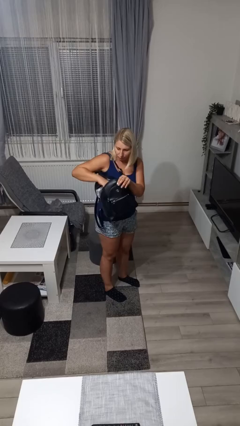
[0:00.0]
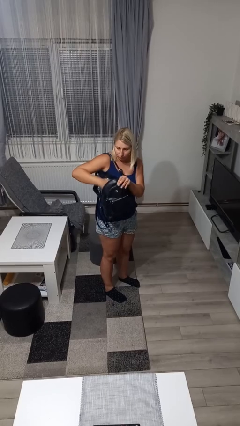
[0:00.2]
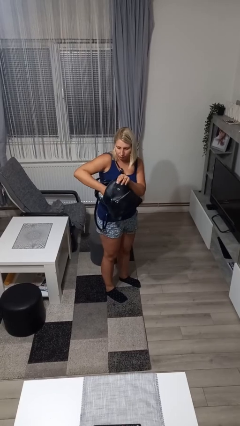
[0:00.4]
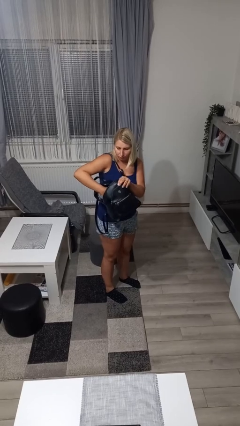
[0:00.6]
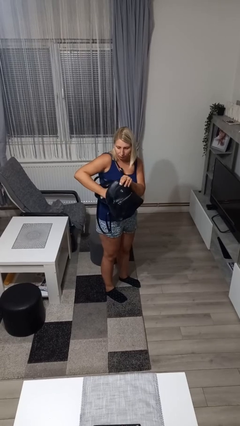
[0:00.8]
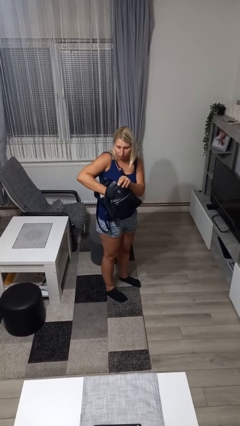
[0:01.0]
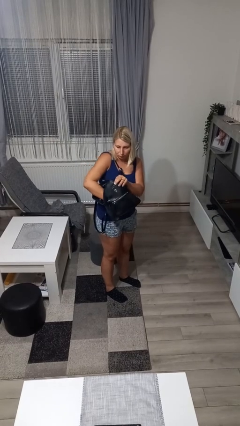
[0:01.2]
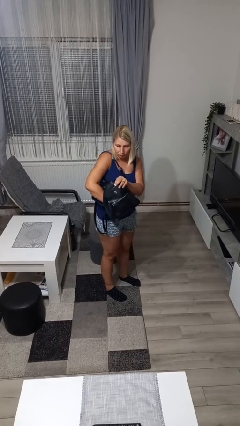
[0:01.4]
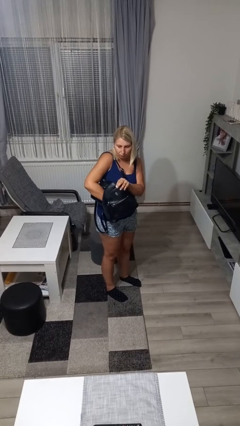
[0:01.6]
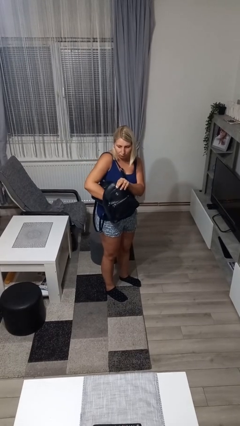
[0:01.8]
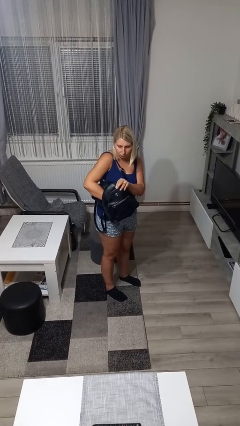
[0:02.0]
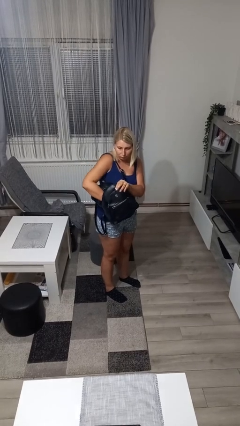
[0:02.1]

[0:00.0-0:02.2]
person searches in backpack

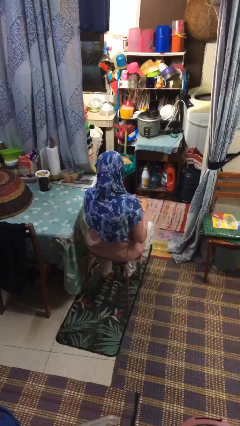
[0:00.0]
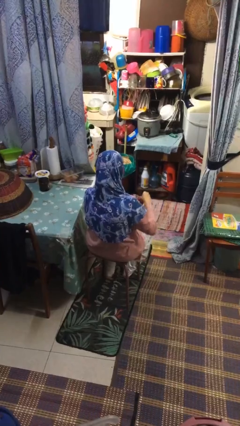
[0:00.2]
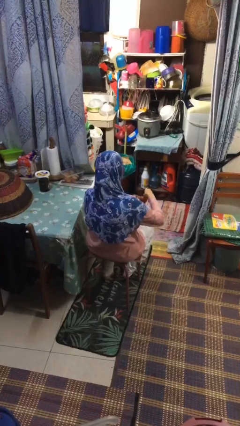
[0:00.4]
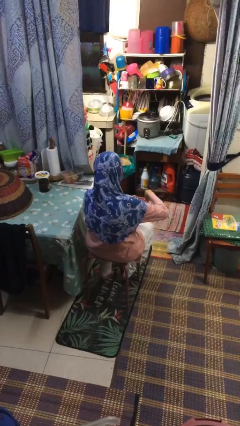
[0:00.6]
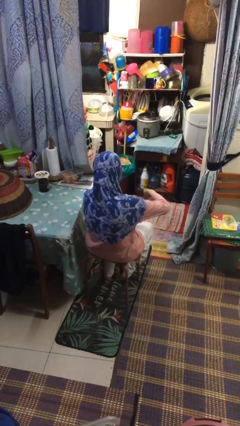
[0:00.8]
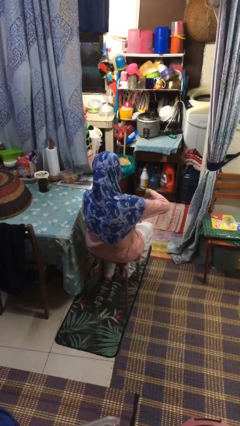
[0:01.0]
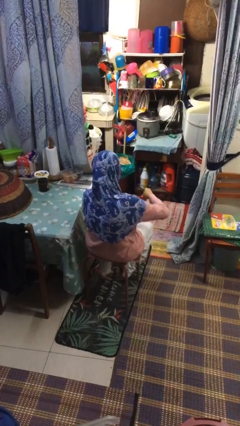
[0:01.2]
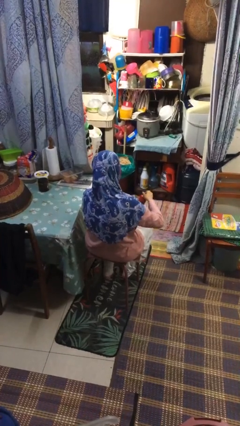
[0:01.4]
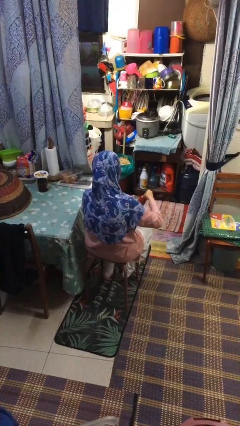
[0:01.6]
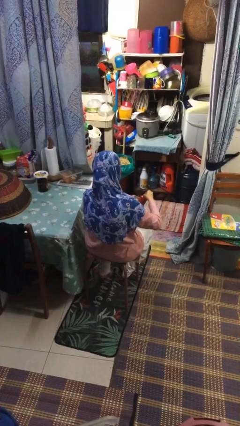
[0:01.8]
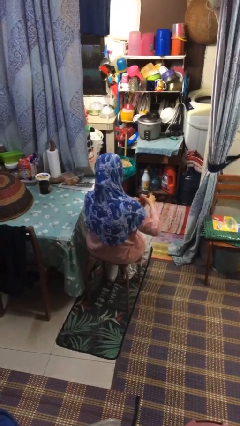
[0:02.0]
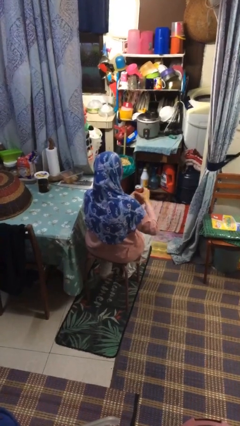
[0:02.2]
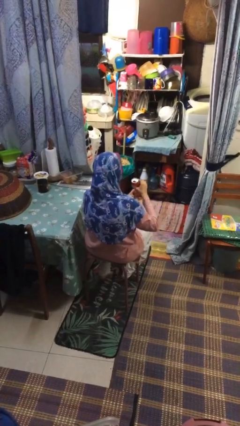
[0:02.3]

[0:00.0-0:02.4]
person opens beverage can

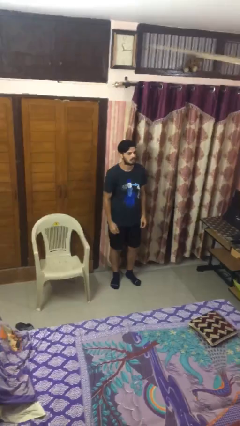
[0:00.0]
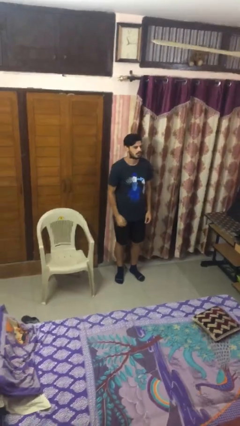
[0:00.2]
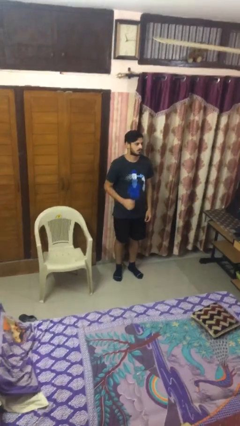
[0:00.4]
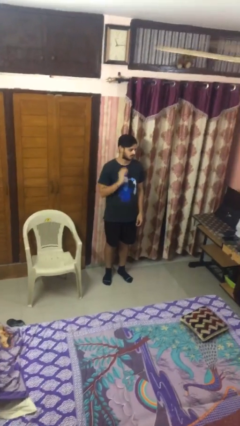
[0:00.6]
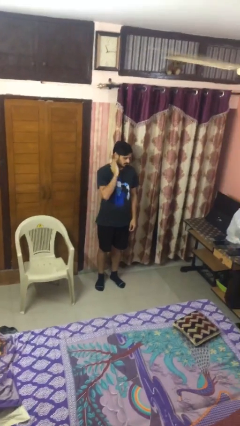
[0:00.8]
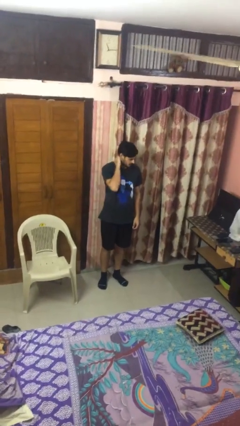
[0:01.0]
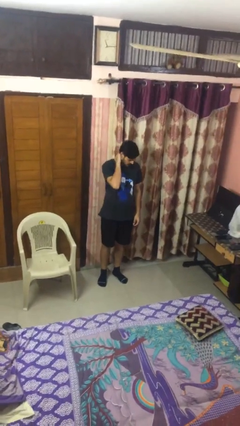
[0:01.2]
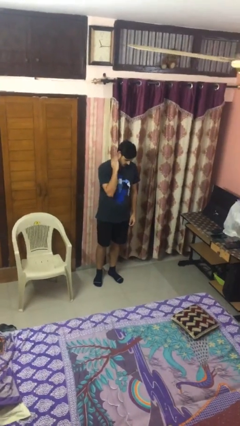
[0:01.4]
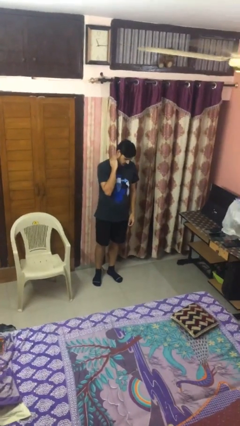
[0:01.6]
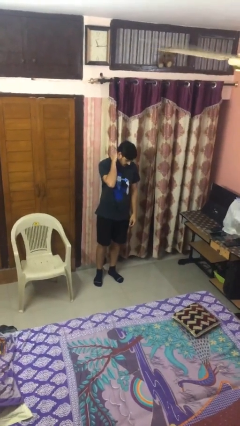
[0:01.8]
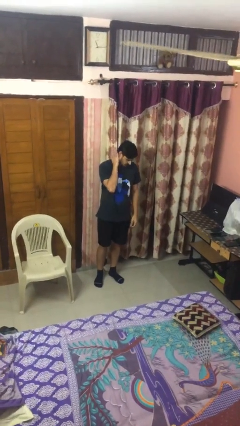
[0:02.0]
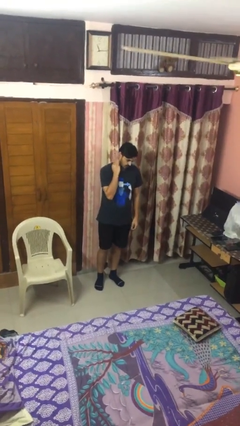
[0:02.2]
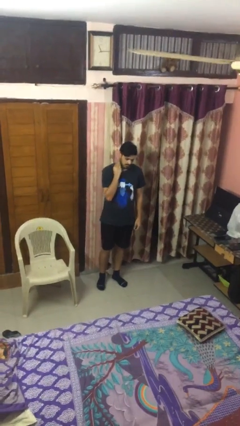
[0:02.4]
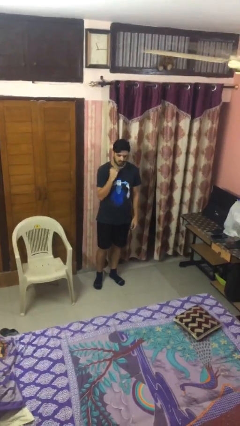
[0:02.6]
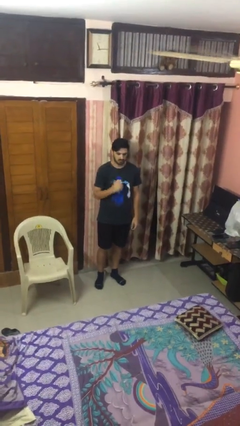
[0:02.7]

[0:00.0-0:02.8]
person rubs neck

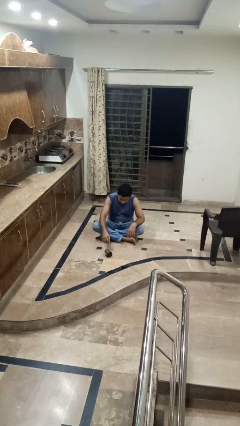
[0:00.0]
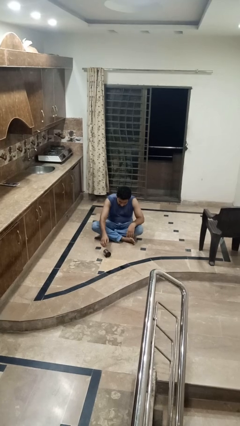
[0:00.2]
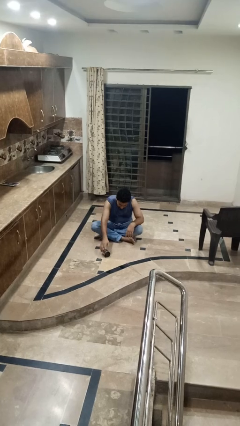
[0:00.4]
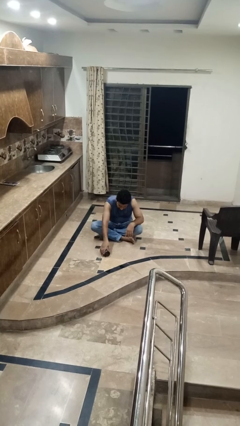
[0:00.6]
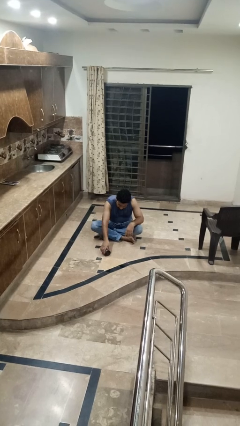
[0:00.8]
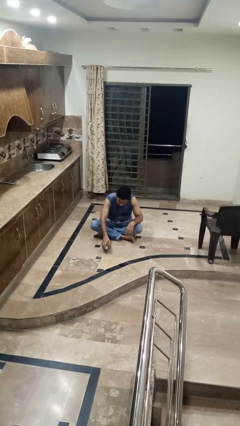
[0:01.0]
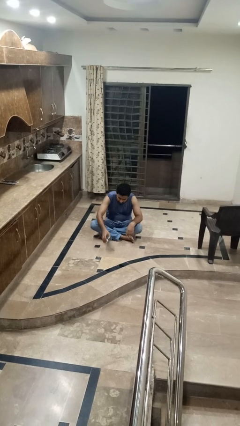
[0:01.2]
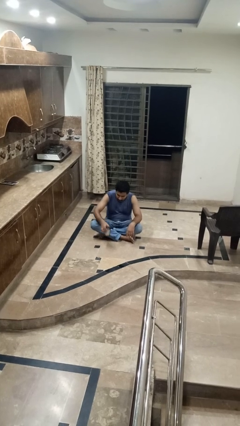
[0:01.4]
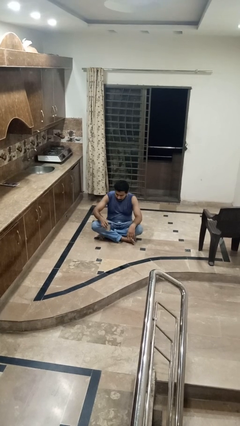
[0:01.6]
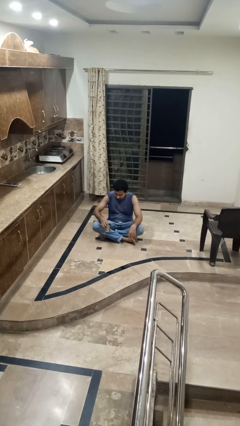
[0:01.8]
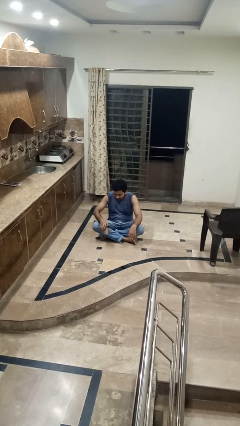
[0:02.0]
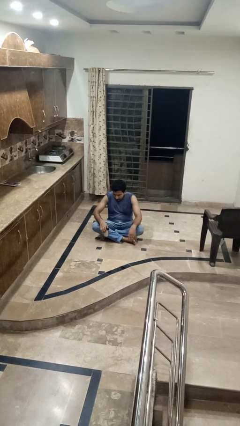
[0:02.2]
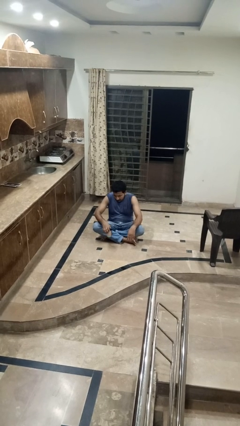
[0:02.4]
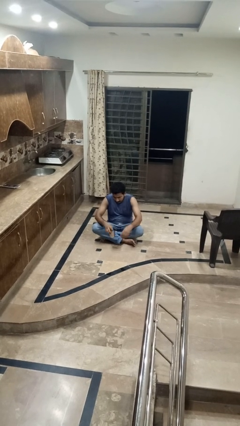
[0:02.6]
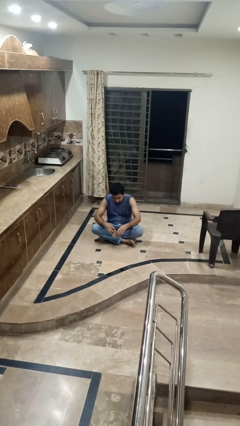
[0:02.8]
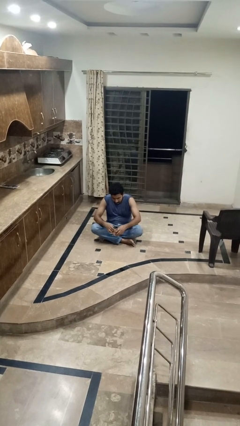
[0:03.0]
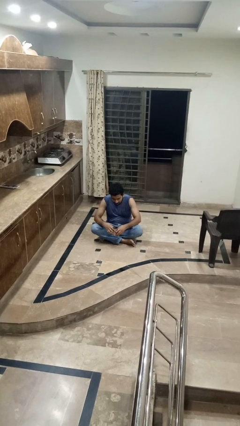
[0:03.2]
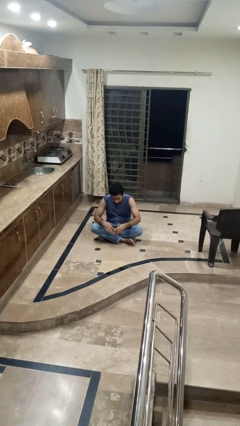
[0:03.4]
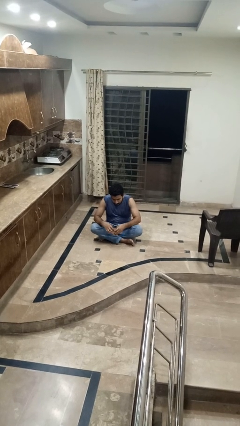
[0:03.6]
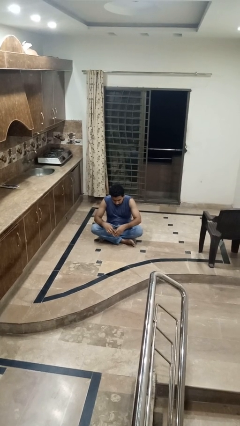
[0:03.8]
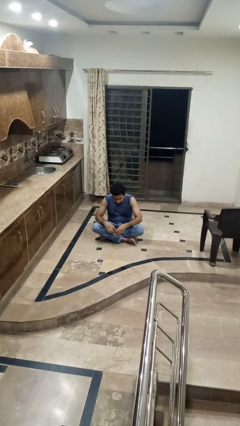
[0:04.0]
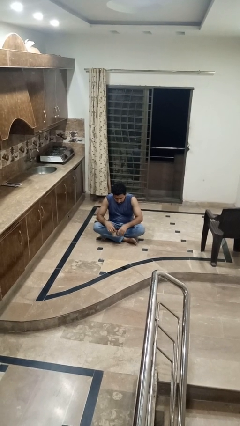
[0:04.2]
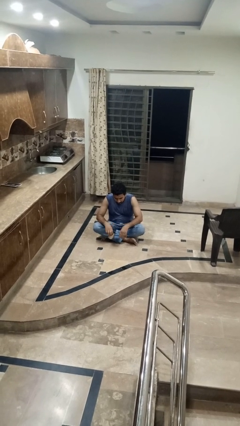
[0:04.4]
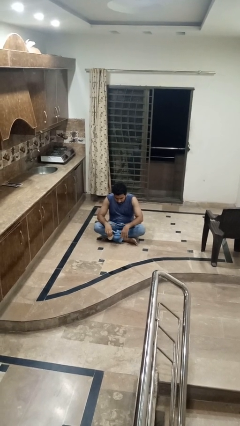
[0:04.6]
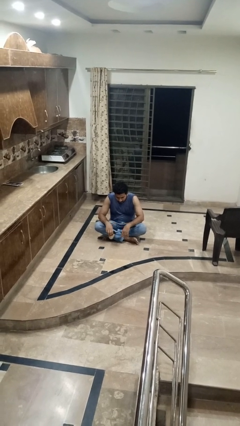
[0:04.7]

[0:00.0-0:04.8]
person sets upright glass

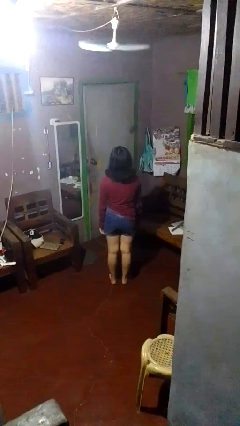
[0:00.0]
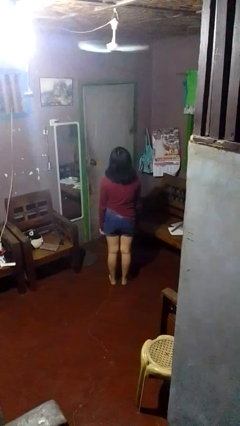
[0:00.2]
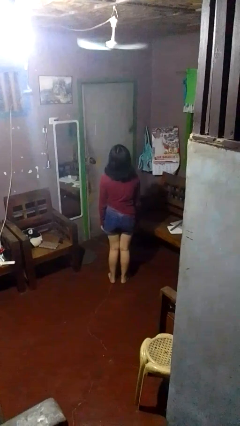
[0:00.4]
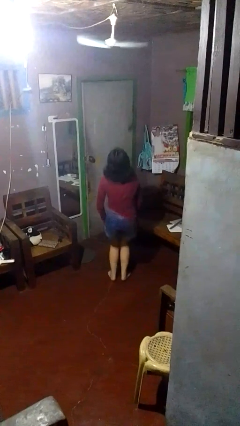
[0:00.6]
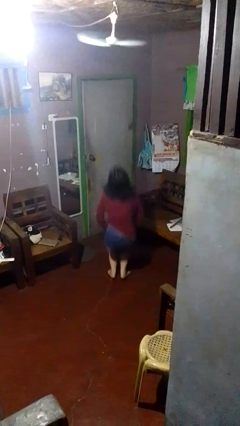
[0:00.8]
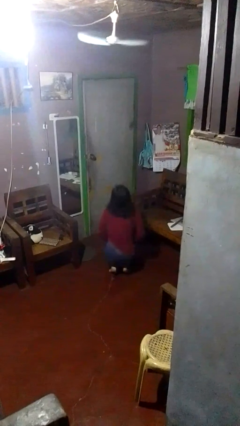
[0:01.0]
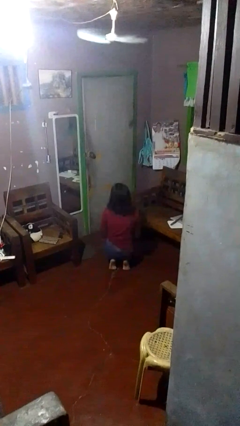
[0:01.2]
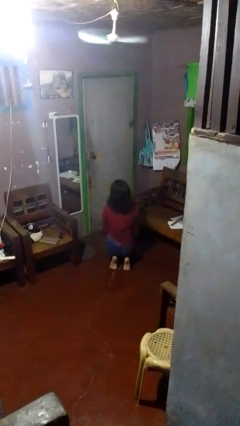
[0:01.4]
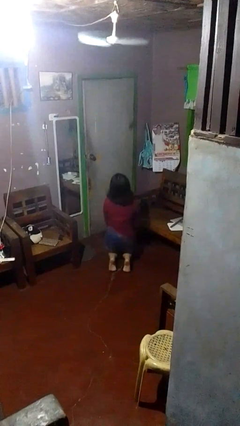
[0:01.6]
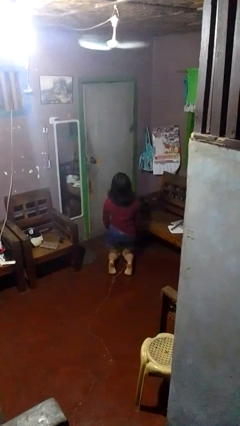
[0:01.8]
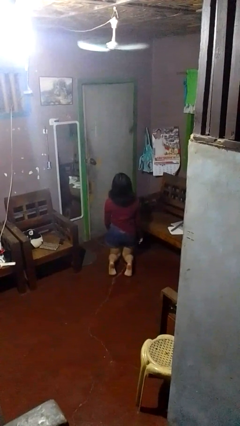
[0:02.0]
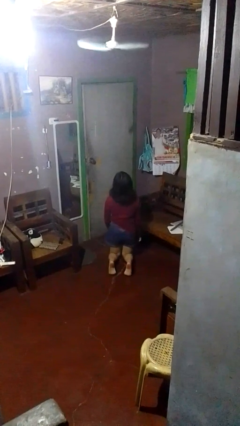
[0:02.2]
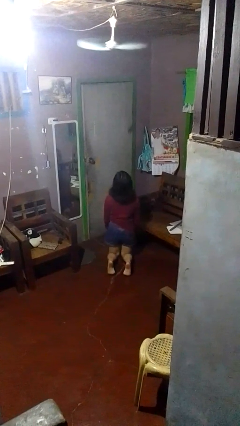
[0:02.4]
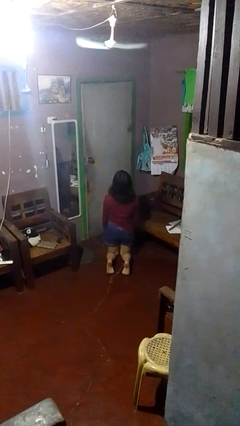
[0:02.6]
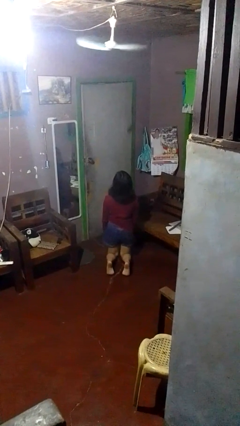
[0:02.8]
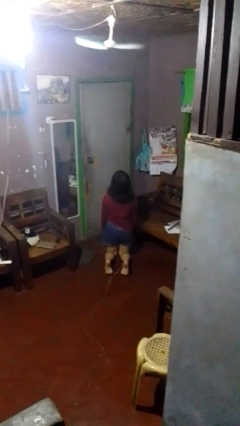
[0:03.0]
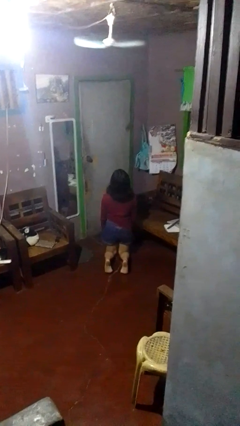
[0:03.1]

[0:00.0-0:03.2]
person kneels

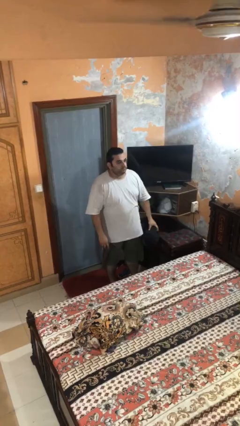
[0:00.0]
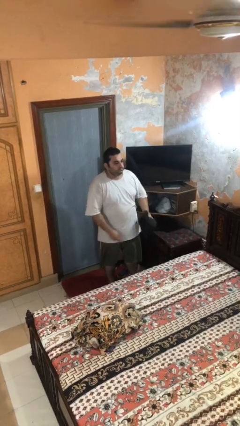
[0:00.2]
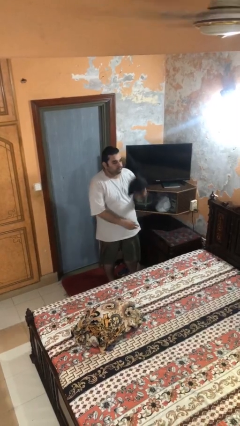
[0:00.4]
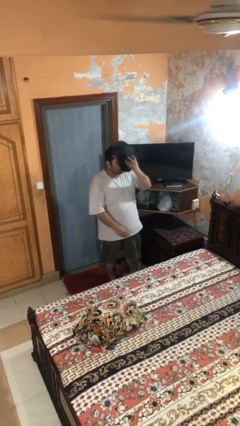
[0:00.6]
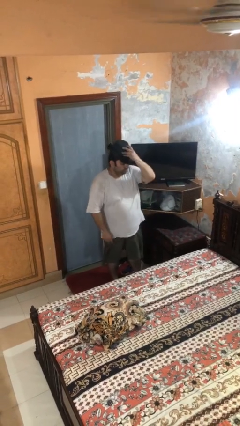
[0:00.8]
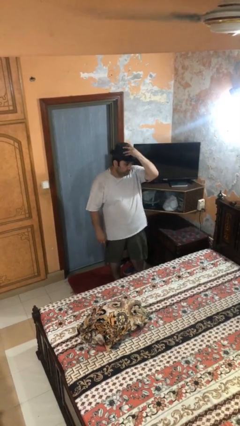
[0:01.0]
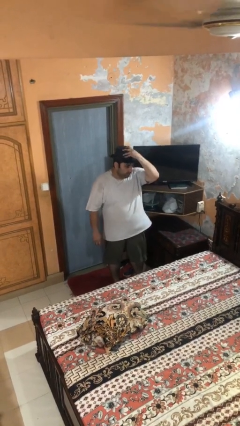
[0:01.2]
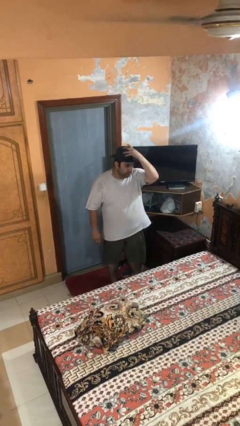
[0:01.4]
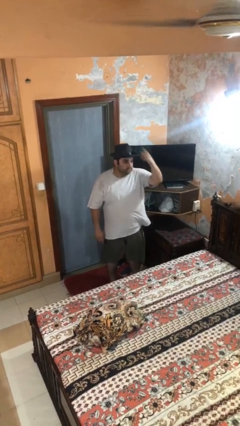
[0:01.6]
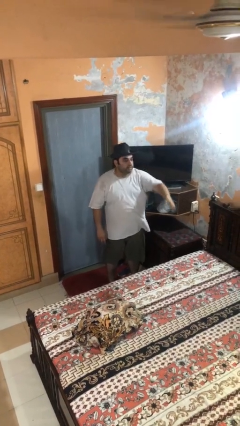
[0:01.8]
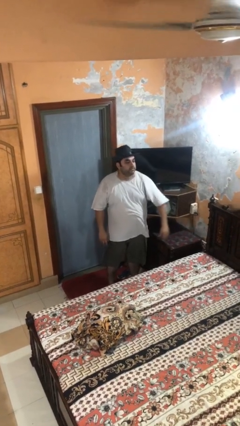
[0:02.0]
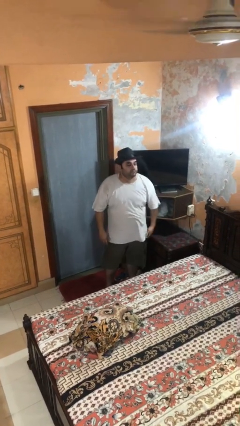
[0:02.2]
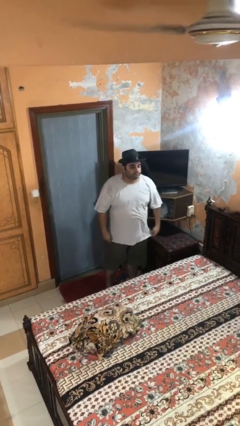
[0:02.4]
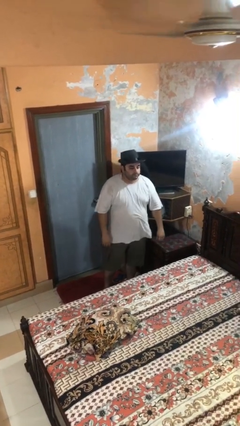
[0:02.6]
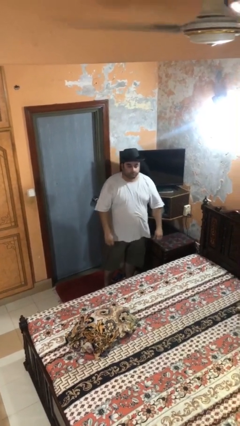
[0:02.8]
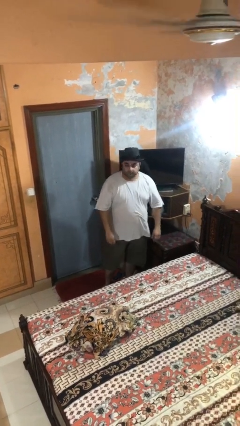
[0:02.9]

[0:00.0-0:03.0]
person puts on hat
